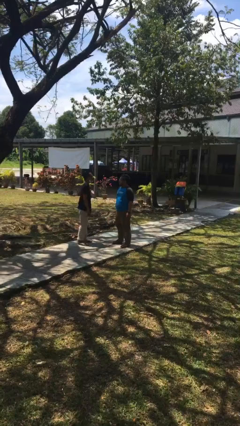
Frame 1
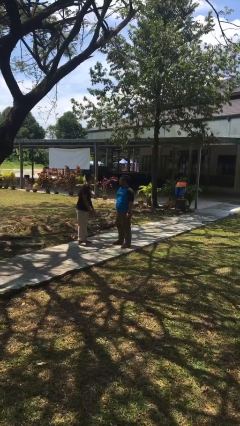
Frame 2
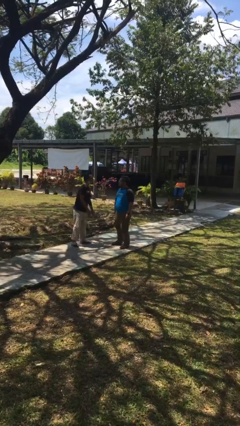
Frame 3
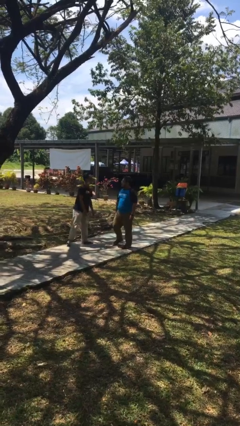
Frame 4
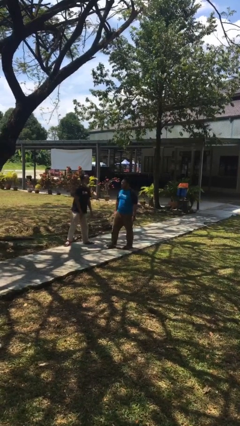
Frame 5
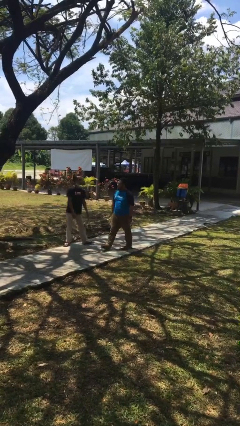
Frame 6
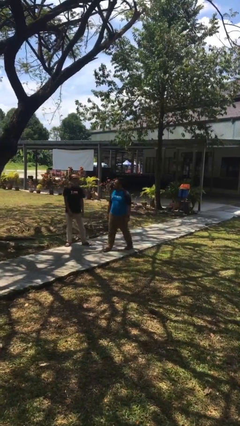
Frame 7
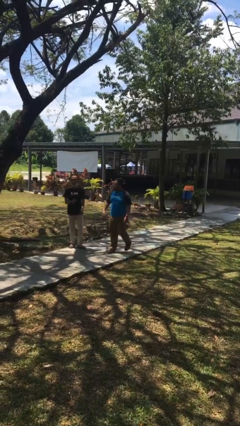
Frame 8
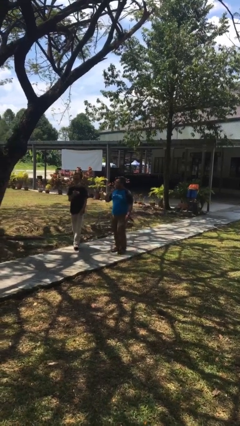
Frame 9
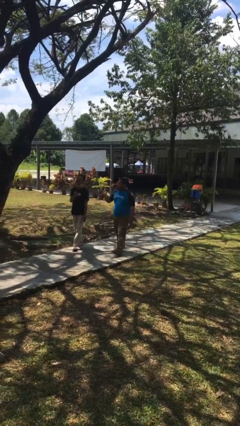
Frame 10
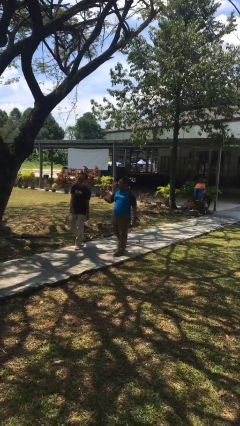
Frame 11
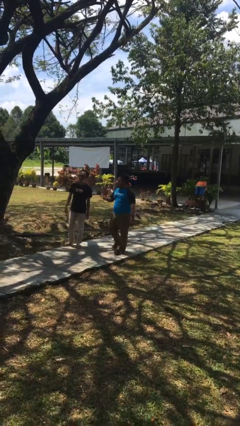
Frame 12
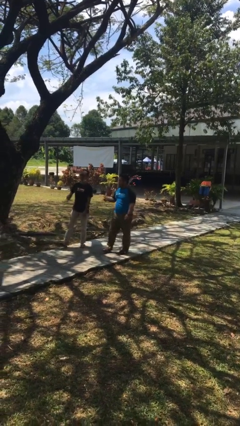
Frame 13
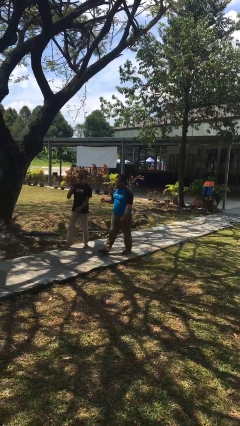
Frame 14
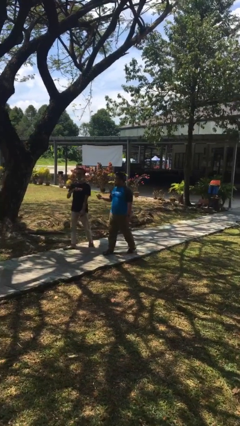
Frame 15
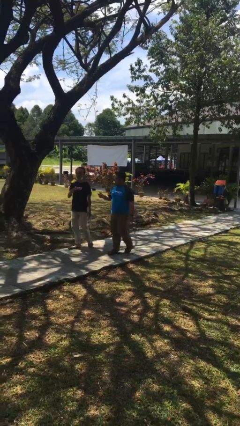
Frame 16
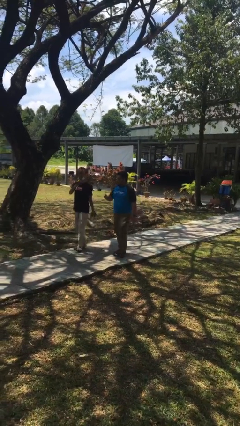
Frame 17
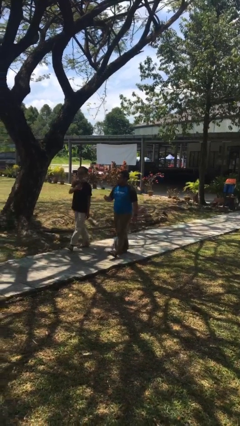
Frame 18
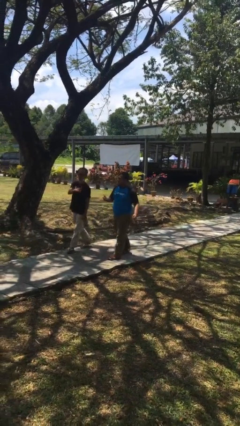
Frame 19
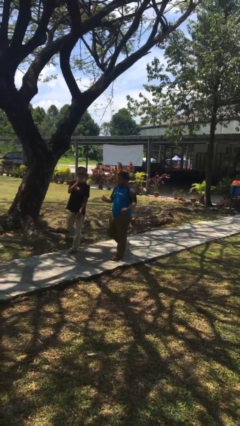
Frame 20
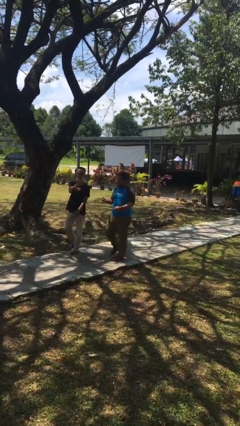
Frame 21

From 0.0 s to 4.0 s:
person talks to person

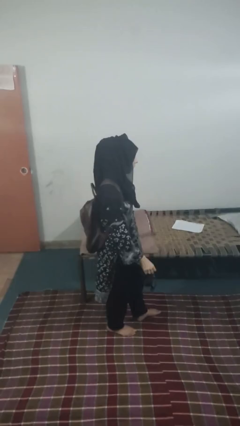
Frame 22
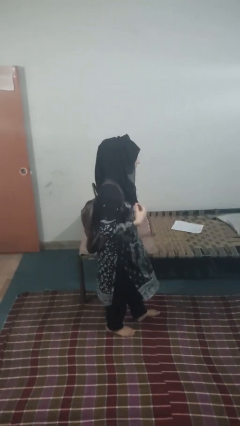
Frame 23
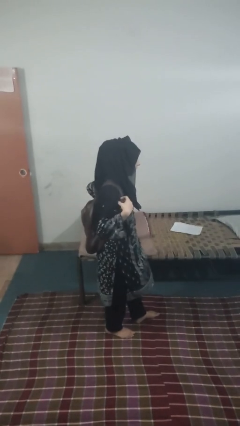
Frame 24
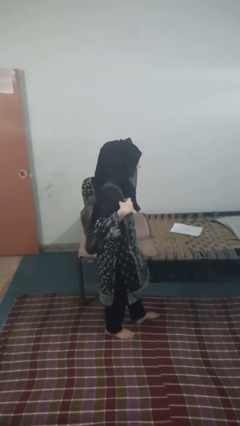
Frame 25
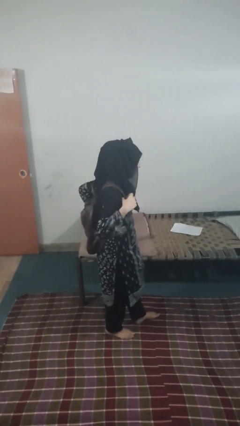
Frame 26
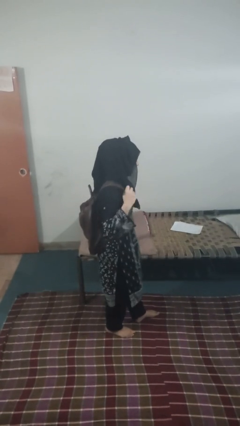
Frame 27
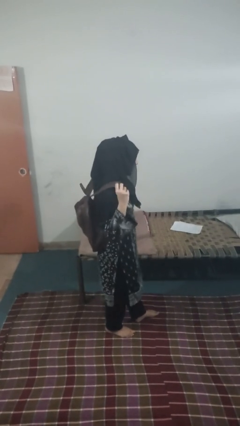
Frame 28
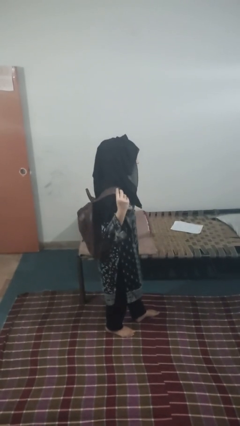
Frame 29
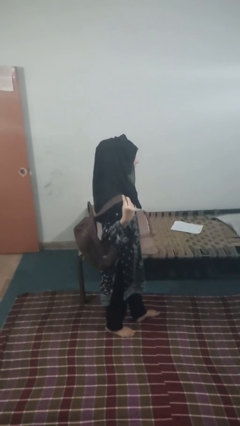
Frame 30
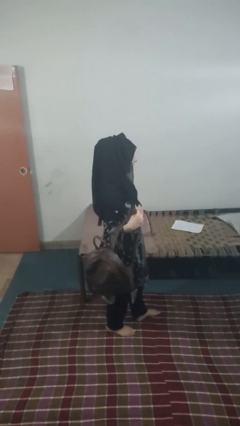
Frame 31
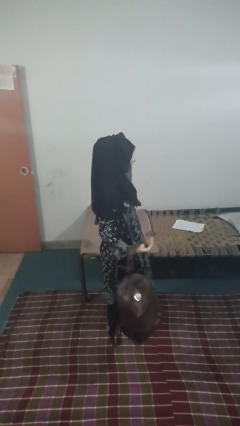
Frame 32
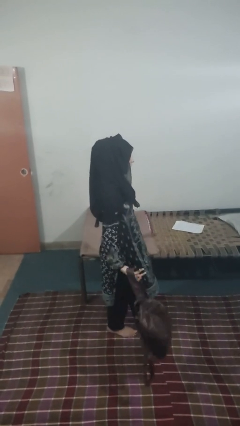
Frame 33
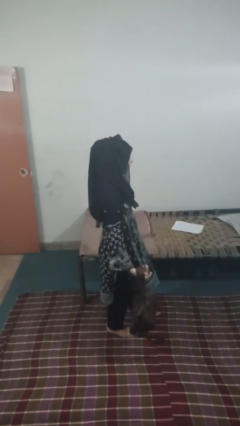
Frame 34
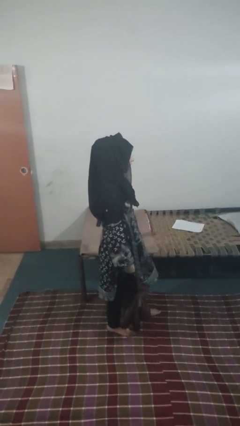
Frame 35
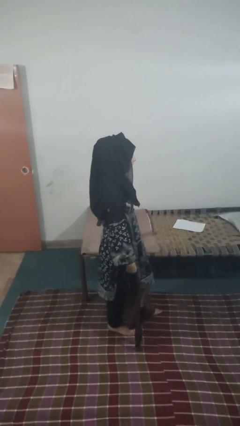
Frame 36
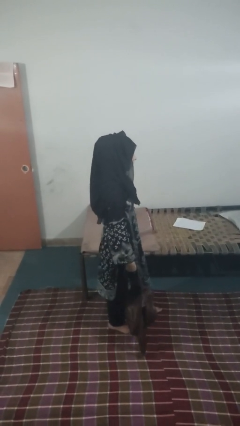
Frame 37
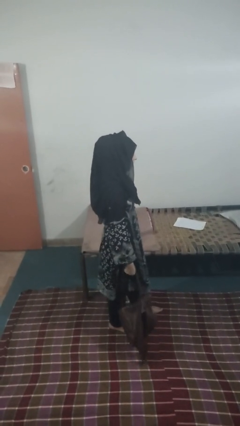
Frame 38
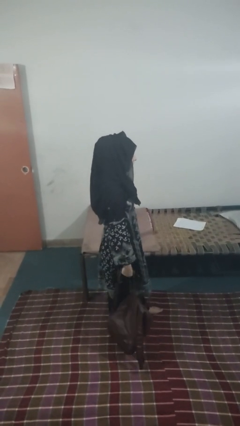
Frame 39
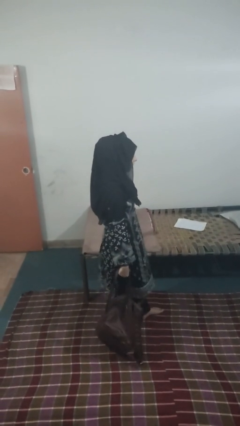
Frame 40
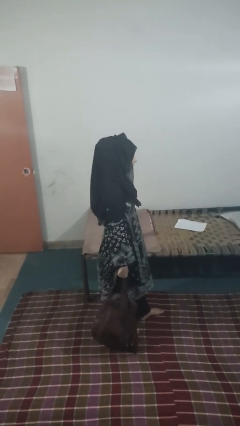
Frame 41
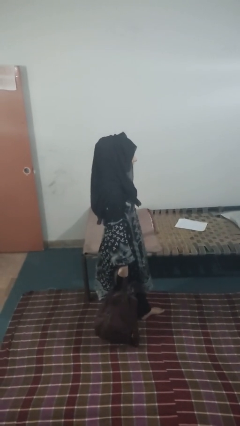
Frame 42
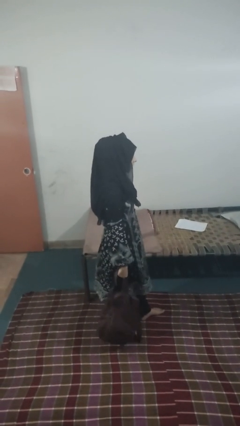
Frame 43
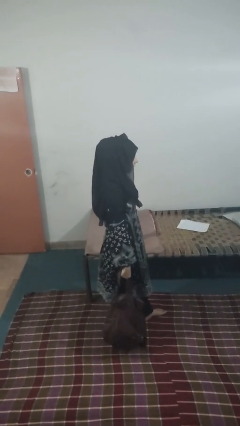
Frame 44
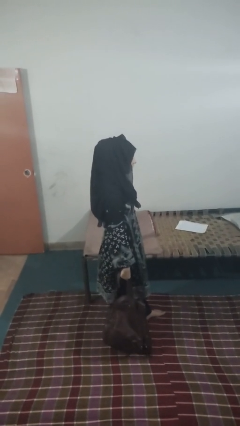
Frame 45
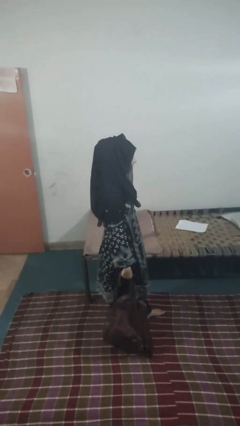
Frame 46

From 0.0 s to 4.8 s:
person takes off backpack

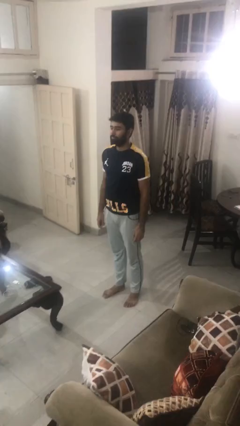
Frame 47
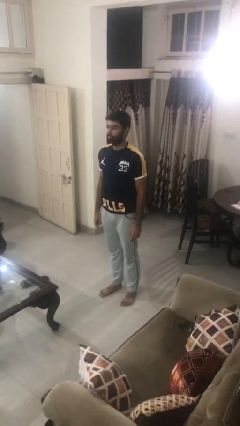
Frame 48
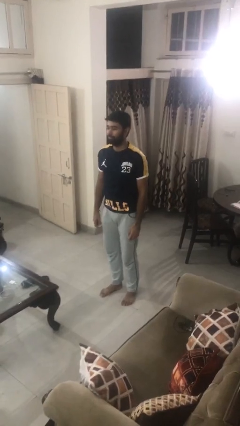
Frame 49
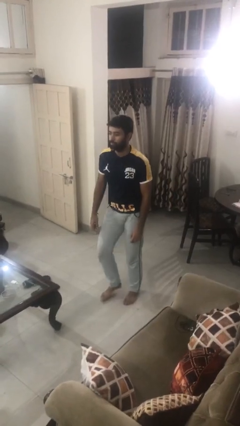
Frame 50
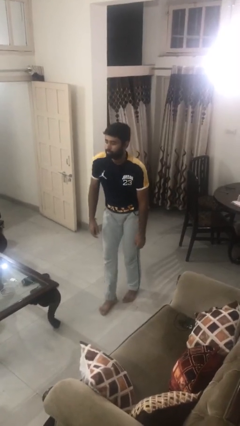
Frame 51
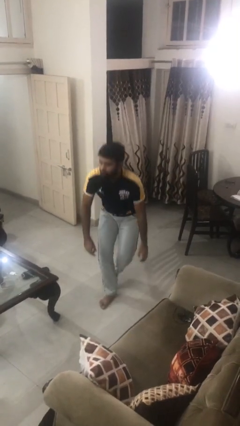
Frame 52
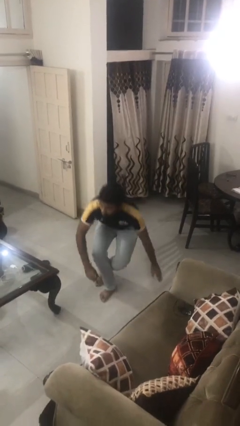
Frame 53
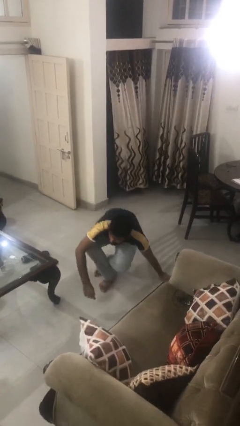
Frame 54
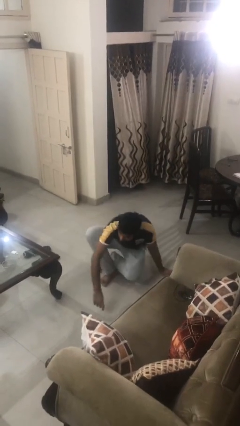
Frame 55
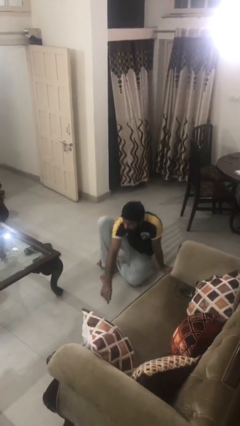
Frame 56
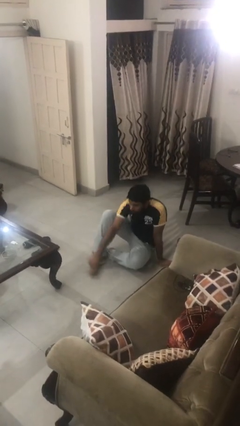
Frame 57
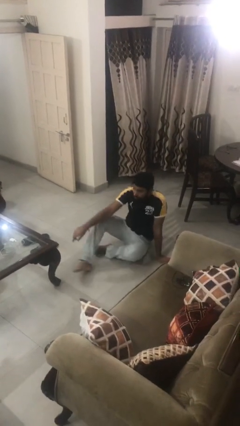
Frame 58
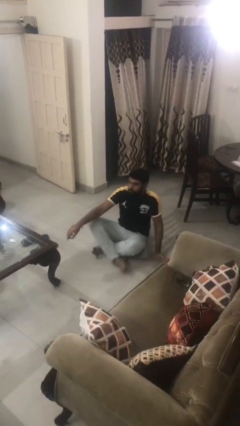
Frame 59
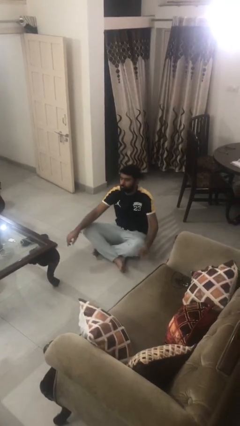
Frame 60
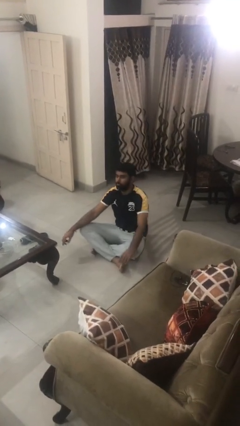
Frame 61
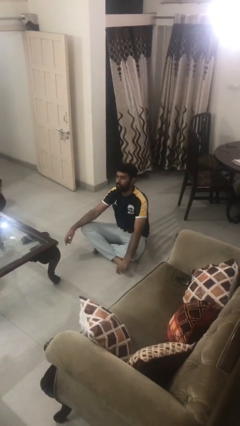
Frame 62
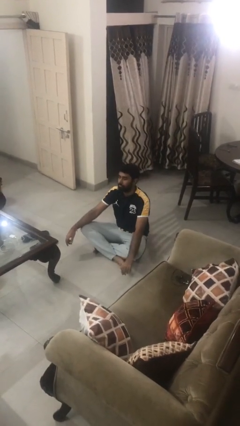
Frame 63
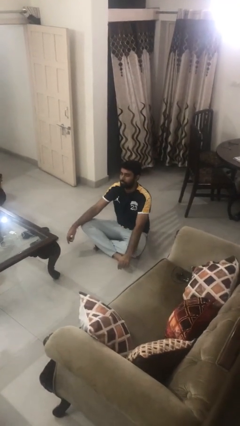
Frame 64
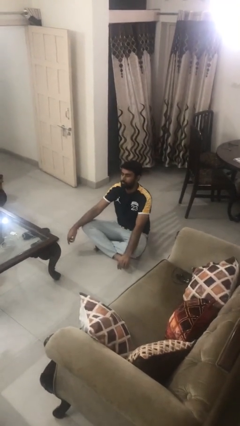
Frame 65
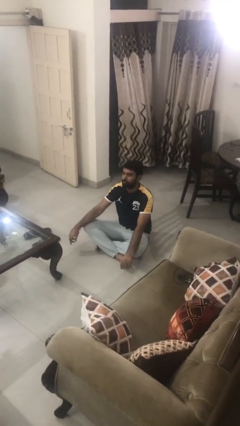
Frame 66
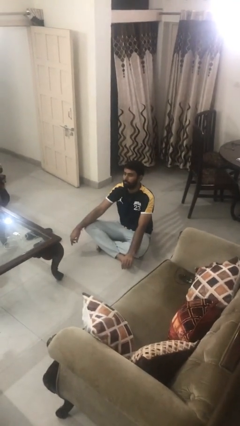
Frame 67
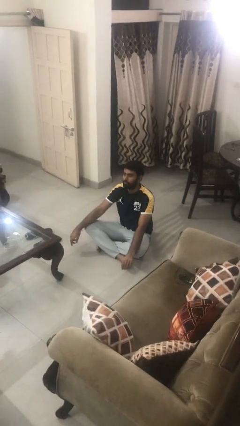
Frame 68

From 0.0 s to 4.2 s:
person sits crisscross

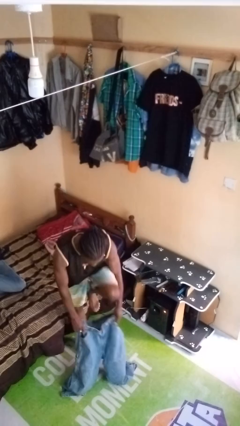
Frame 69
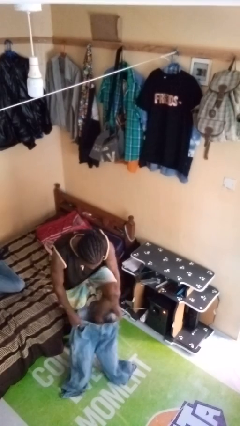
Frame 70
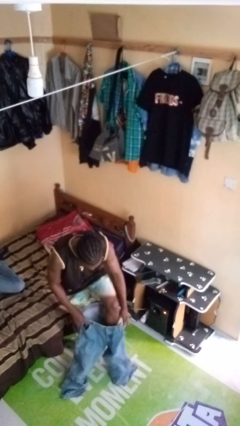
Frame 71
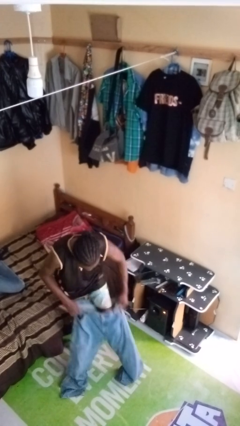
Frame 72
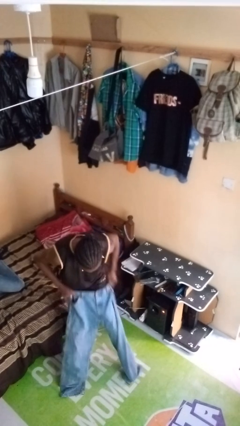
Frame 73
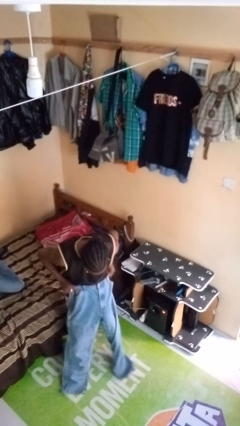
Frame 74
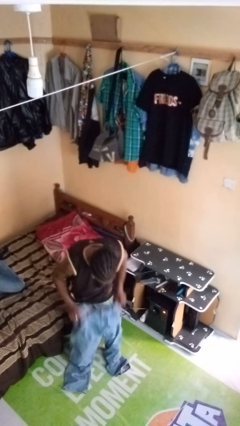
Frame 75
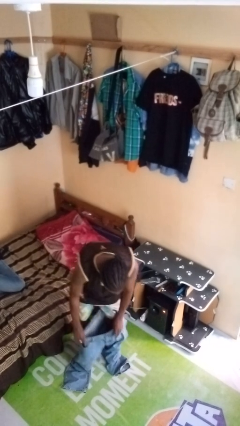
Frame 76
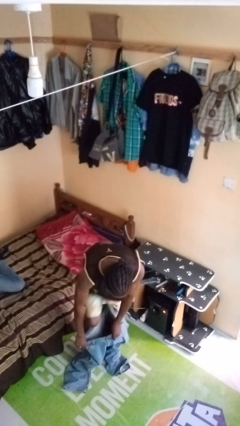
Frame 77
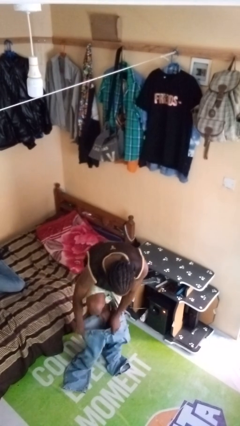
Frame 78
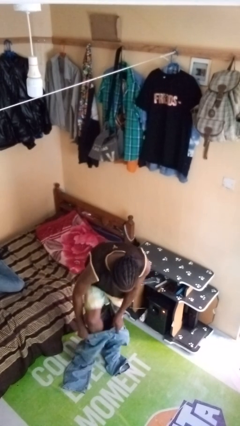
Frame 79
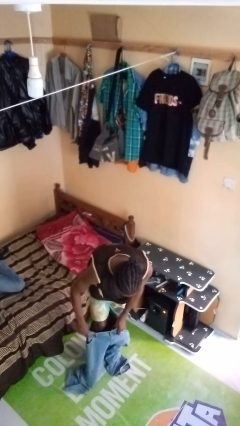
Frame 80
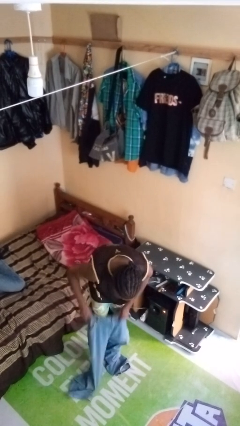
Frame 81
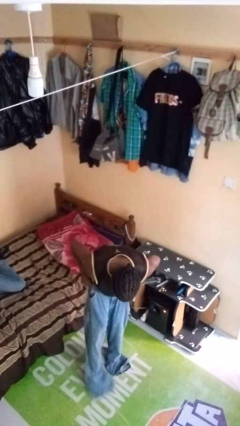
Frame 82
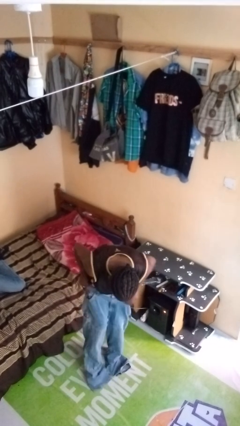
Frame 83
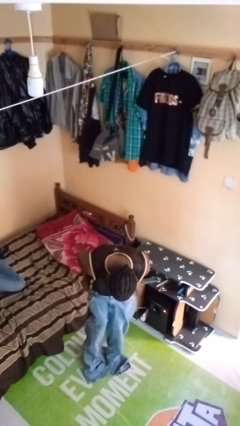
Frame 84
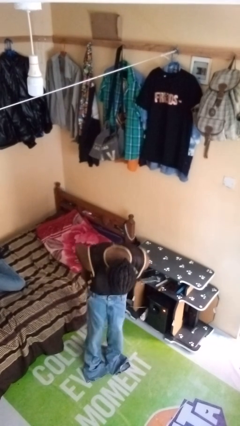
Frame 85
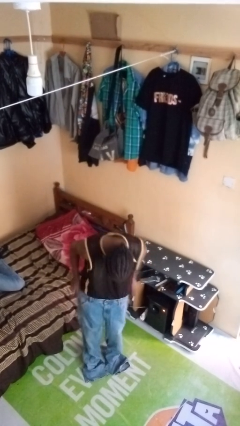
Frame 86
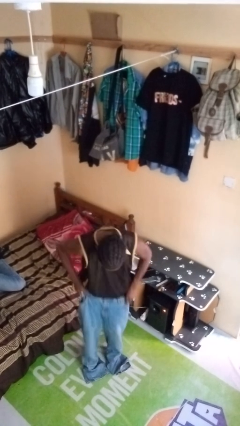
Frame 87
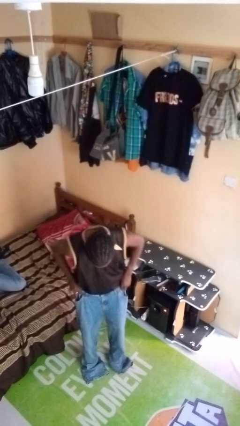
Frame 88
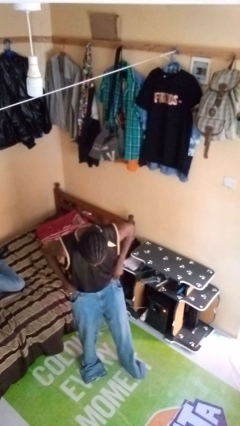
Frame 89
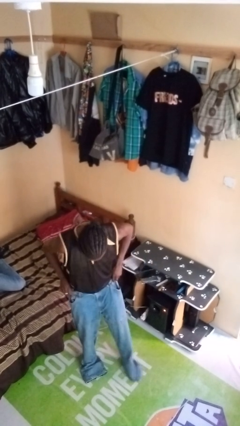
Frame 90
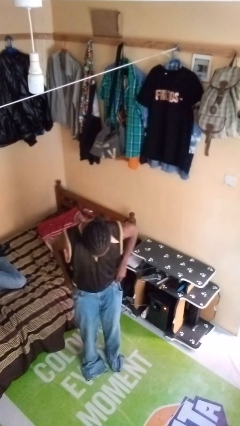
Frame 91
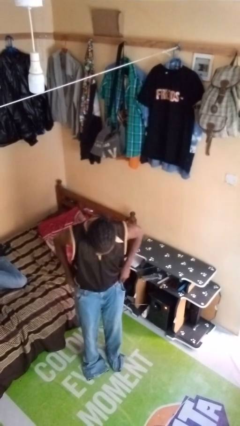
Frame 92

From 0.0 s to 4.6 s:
person puts on pants

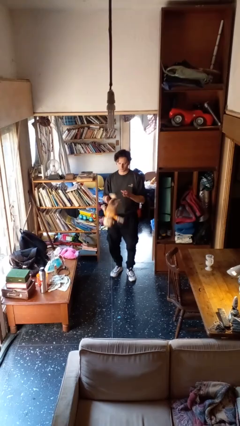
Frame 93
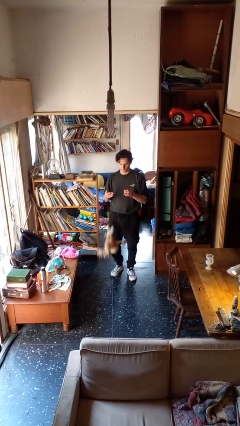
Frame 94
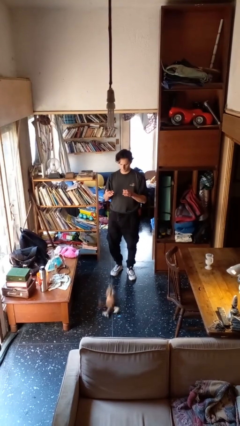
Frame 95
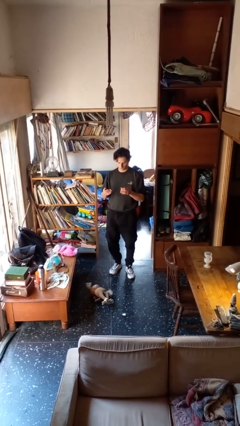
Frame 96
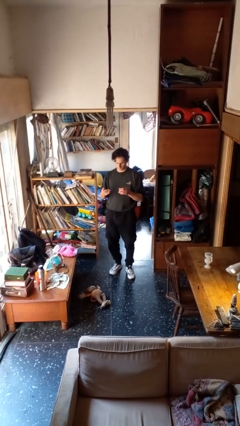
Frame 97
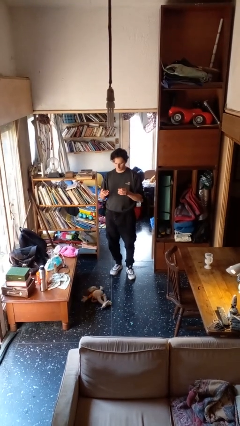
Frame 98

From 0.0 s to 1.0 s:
person drops object
